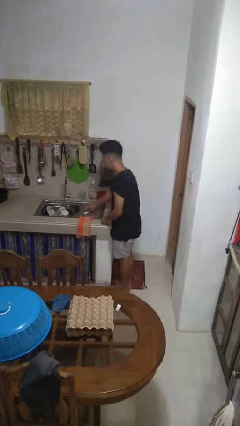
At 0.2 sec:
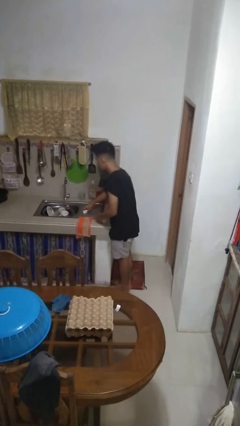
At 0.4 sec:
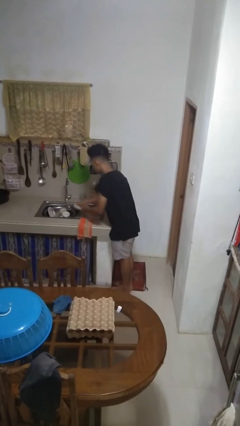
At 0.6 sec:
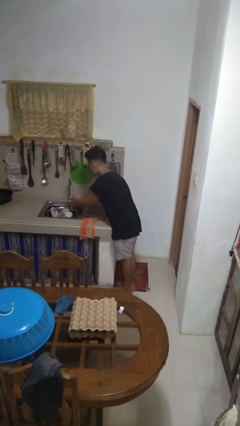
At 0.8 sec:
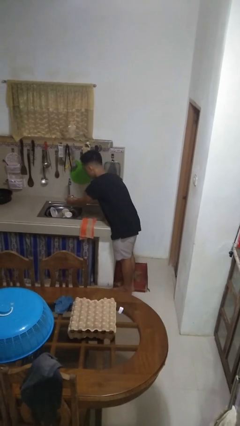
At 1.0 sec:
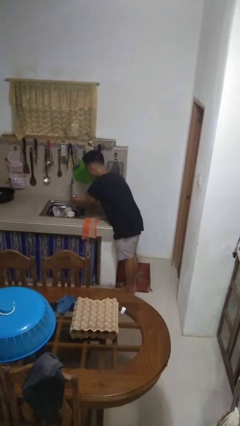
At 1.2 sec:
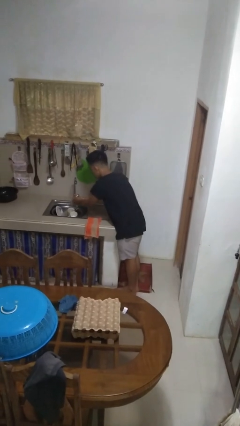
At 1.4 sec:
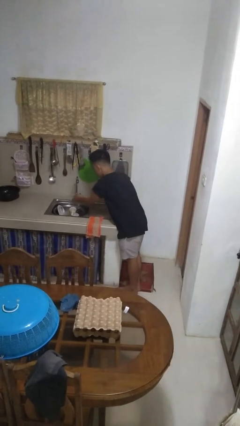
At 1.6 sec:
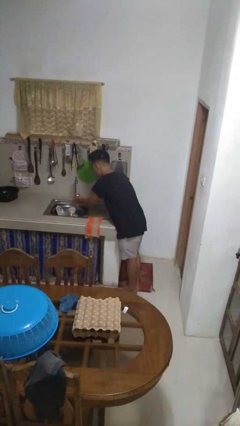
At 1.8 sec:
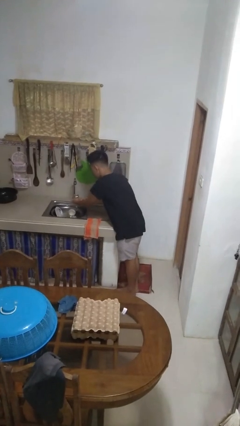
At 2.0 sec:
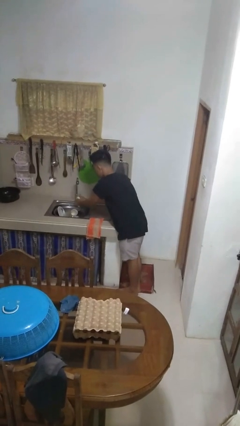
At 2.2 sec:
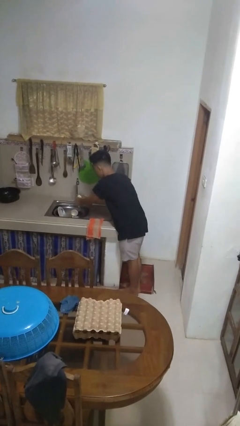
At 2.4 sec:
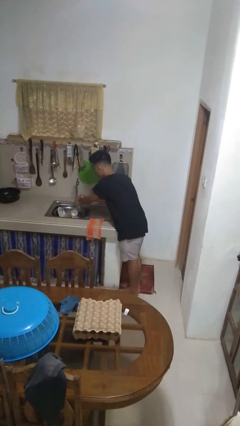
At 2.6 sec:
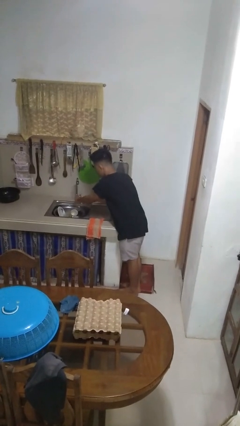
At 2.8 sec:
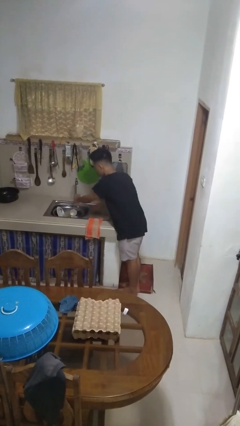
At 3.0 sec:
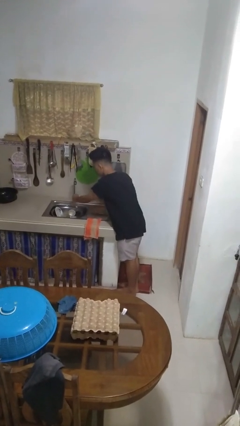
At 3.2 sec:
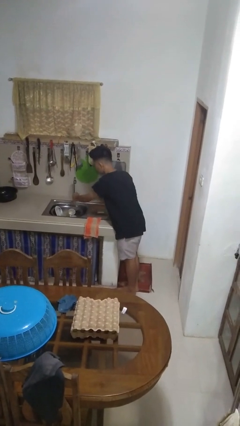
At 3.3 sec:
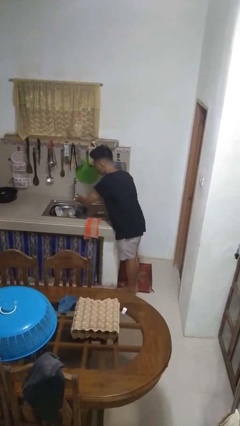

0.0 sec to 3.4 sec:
person washes hands

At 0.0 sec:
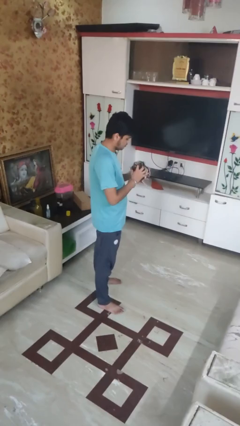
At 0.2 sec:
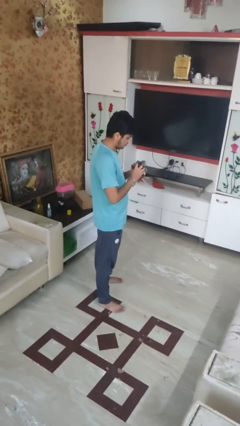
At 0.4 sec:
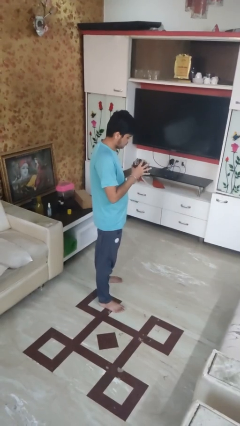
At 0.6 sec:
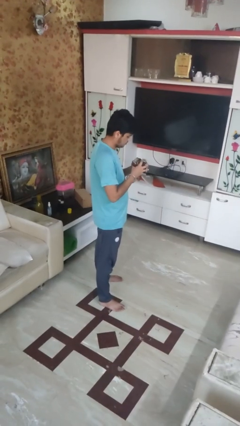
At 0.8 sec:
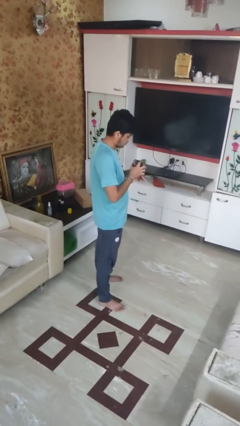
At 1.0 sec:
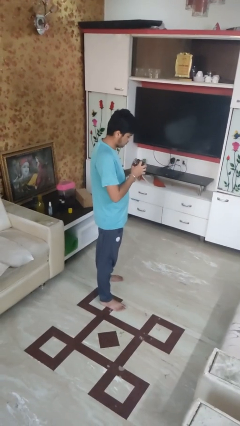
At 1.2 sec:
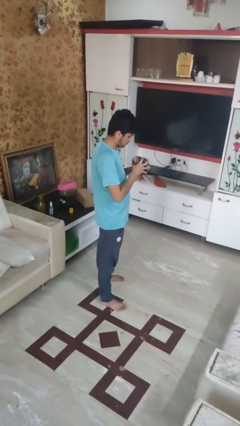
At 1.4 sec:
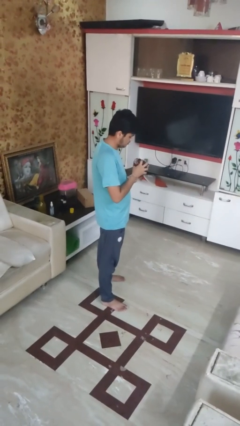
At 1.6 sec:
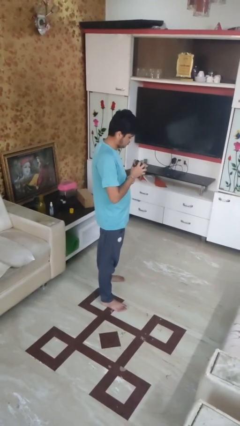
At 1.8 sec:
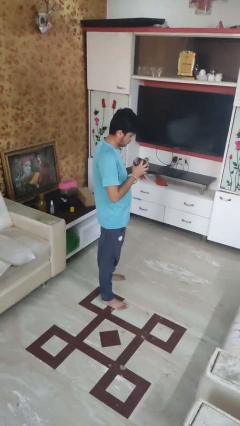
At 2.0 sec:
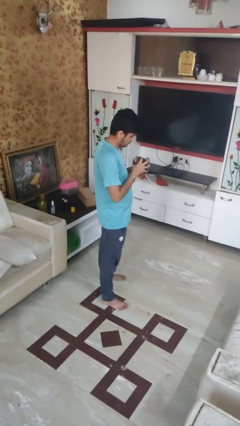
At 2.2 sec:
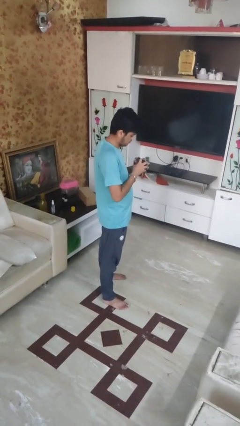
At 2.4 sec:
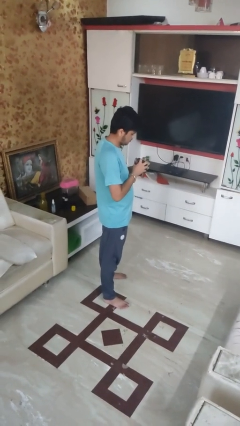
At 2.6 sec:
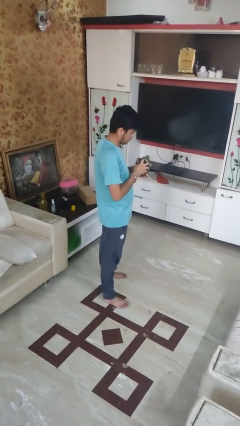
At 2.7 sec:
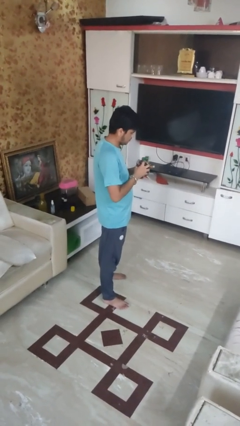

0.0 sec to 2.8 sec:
person squeezes object

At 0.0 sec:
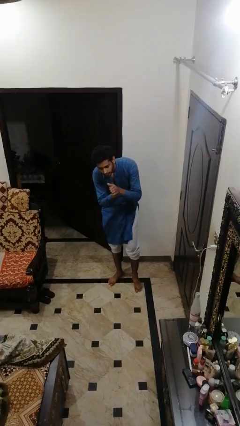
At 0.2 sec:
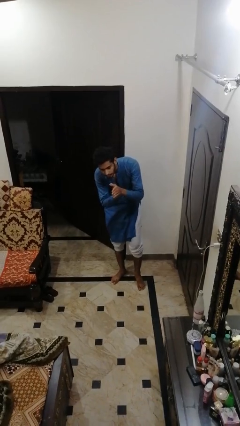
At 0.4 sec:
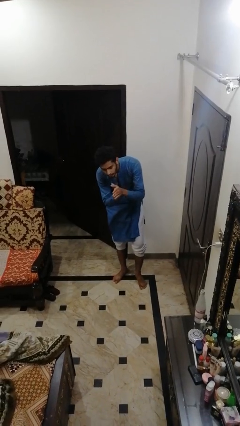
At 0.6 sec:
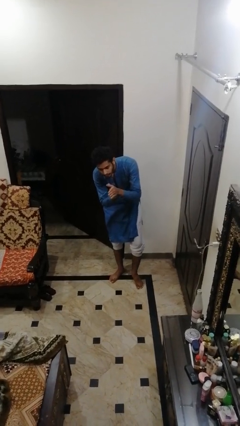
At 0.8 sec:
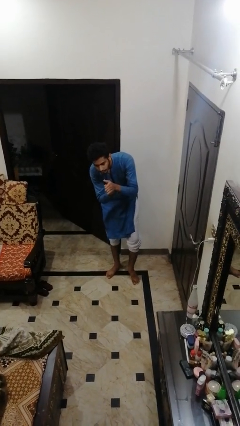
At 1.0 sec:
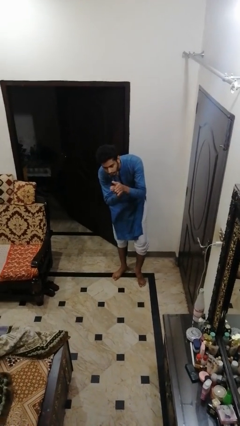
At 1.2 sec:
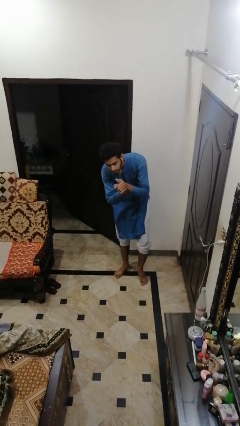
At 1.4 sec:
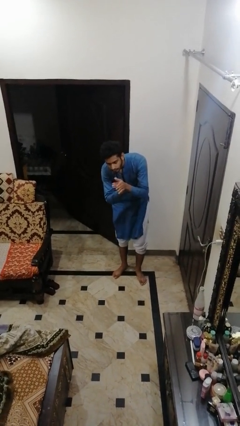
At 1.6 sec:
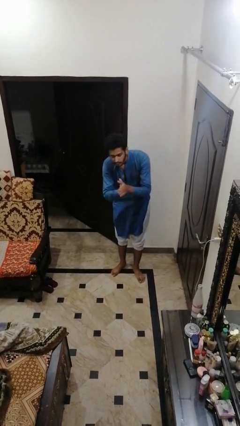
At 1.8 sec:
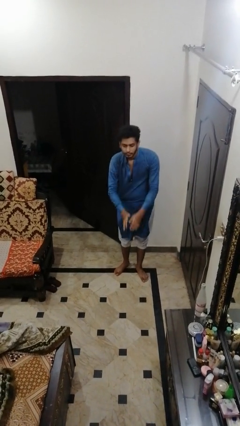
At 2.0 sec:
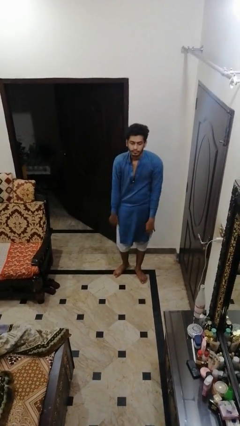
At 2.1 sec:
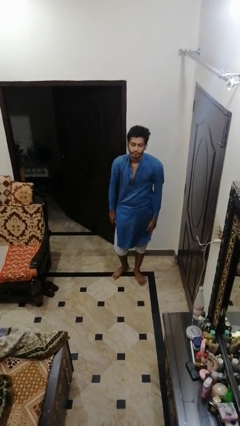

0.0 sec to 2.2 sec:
person claps hands

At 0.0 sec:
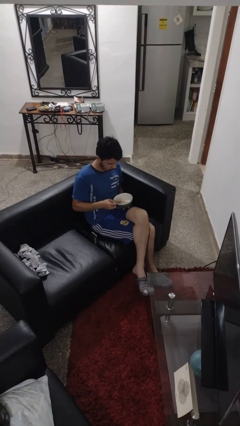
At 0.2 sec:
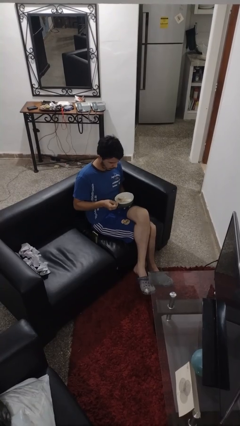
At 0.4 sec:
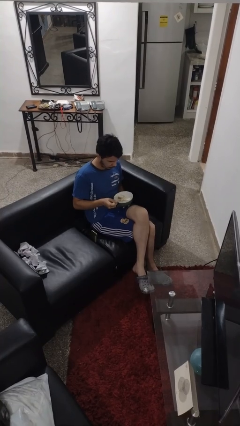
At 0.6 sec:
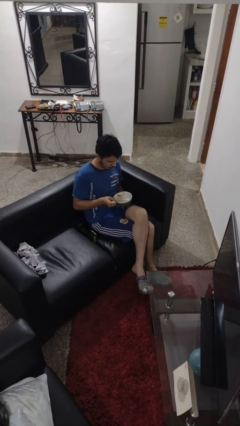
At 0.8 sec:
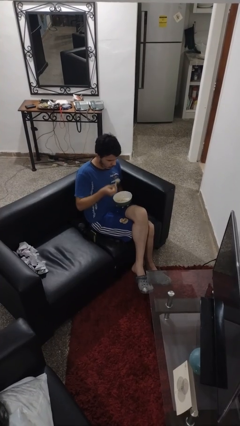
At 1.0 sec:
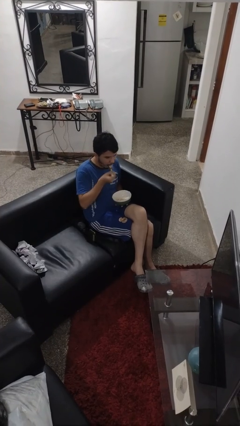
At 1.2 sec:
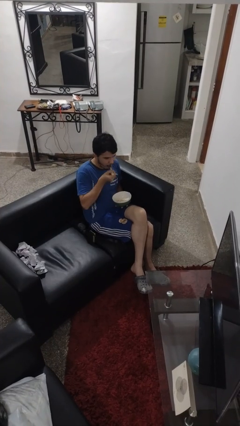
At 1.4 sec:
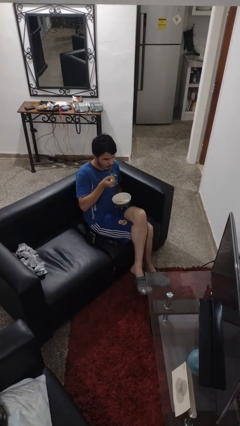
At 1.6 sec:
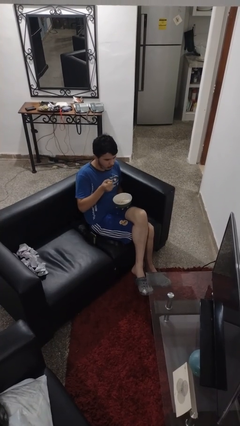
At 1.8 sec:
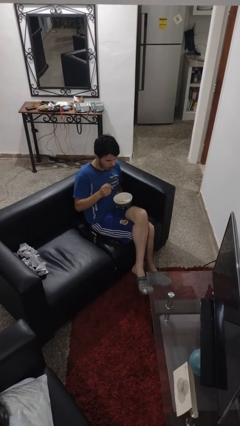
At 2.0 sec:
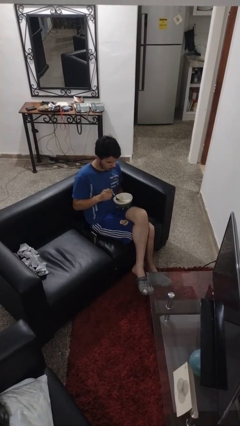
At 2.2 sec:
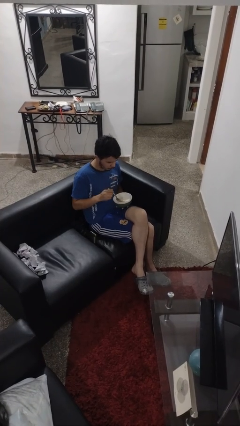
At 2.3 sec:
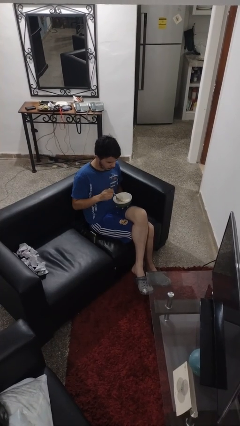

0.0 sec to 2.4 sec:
person eats with utensil

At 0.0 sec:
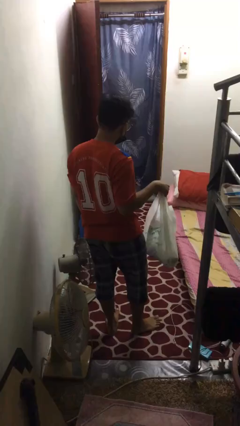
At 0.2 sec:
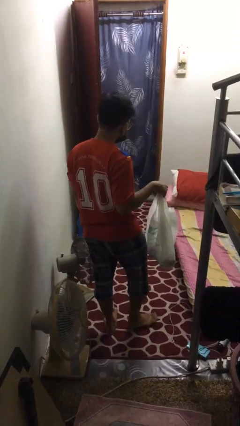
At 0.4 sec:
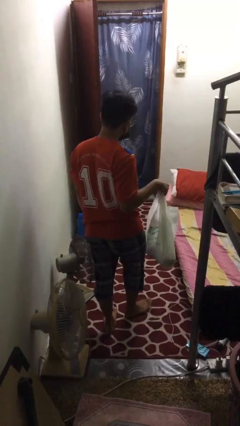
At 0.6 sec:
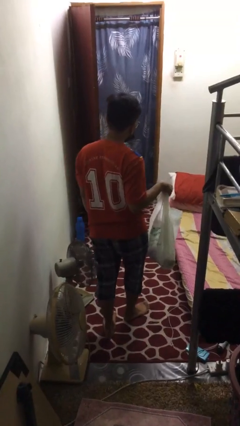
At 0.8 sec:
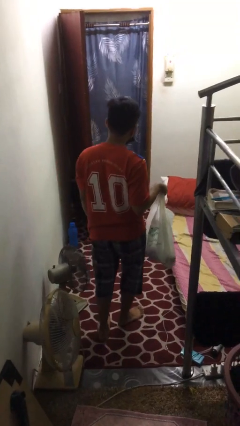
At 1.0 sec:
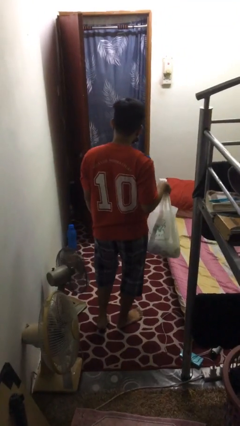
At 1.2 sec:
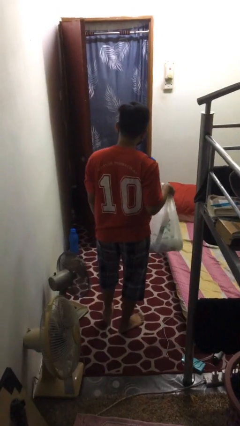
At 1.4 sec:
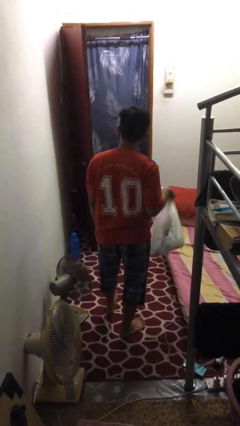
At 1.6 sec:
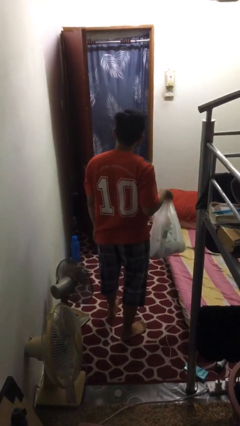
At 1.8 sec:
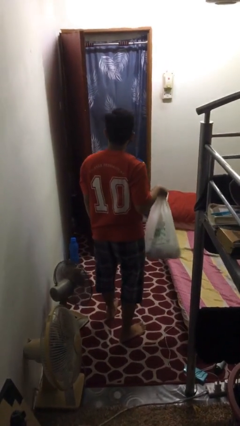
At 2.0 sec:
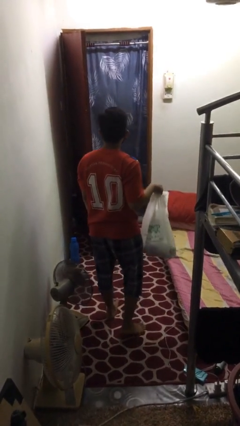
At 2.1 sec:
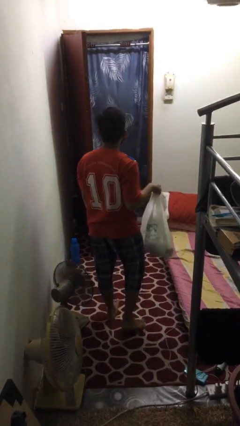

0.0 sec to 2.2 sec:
person carries groceries

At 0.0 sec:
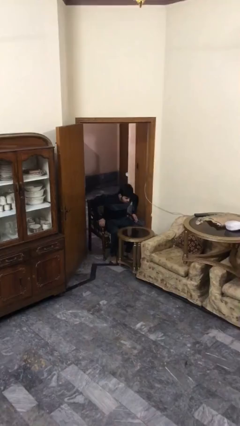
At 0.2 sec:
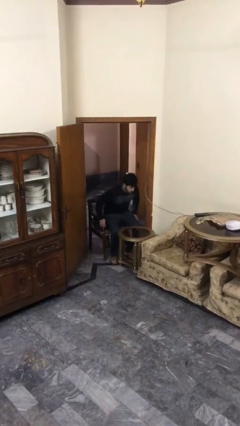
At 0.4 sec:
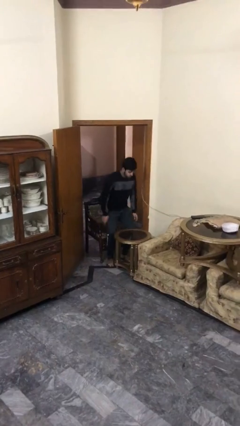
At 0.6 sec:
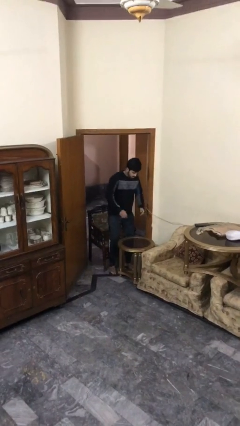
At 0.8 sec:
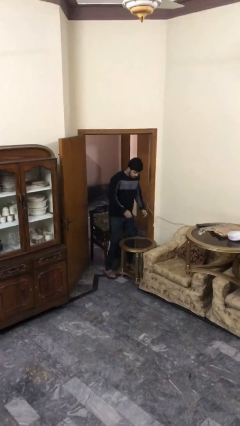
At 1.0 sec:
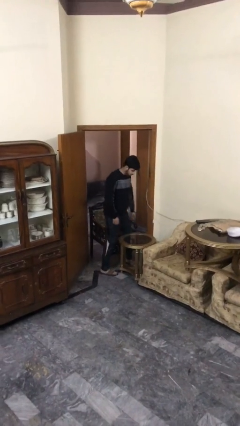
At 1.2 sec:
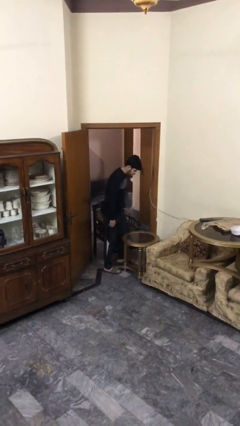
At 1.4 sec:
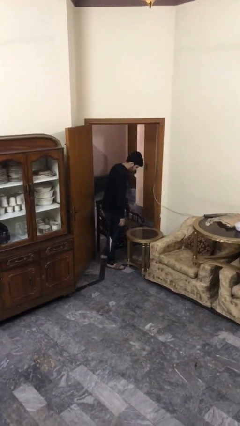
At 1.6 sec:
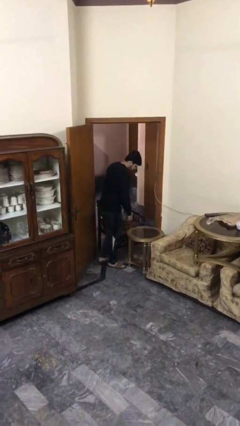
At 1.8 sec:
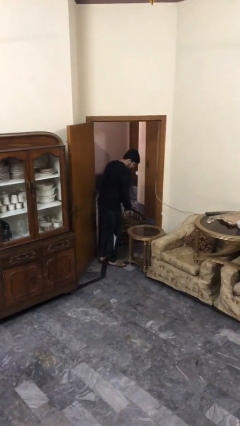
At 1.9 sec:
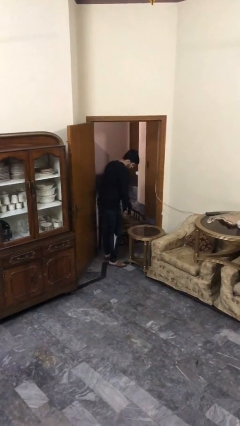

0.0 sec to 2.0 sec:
person stands up

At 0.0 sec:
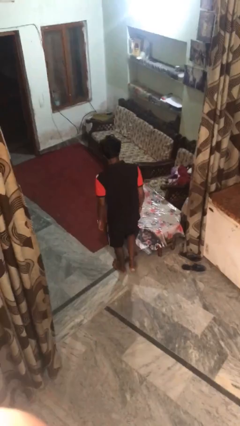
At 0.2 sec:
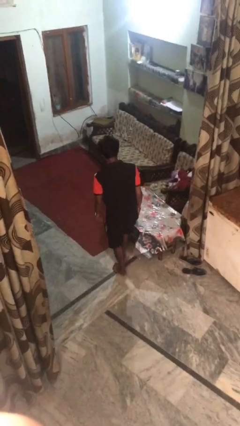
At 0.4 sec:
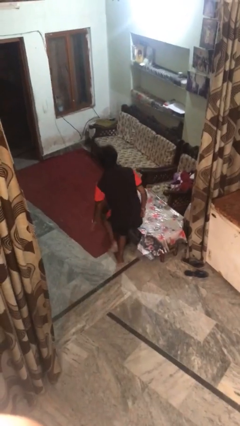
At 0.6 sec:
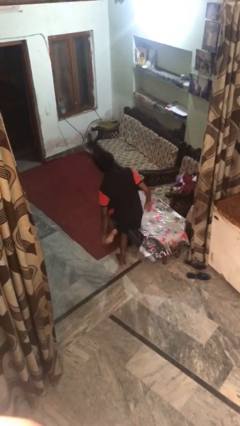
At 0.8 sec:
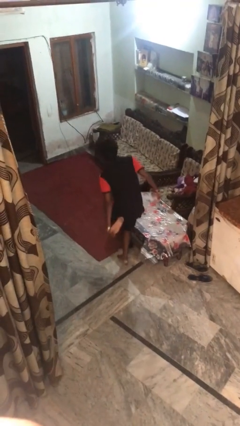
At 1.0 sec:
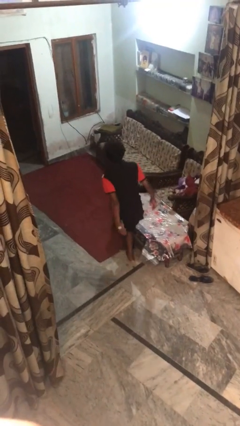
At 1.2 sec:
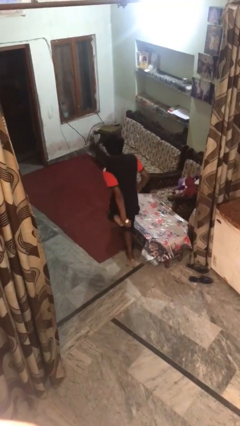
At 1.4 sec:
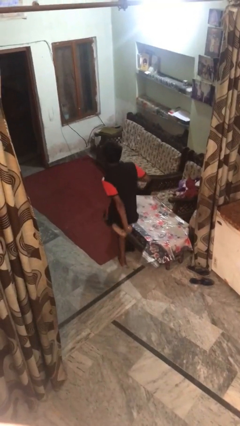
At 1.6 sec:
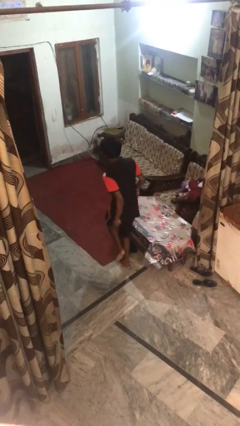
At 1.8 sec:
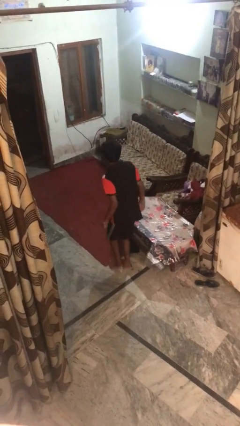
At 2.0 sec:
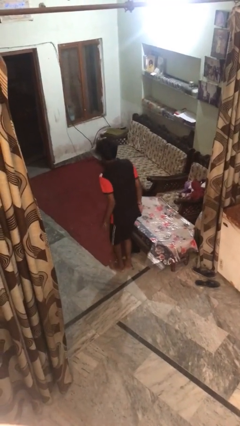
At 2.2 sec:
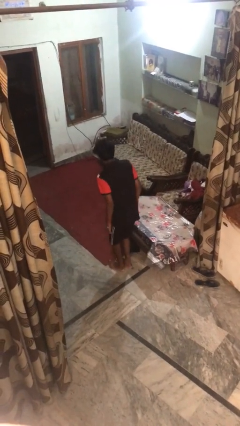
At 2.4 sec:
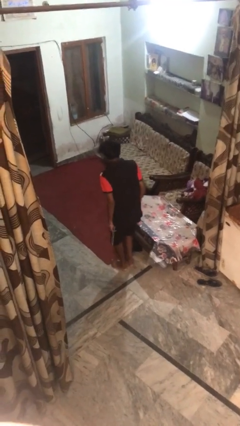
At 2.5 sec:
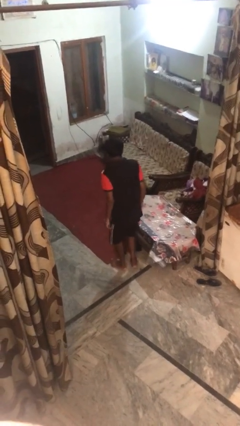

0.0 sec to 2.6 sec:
person stubs toe
